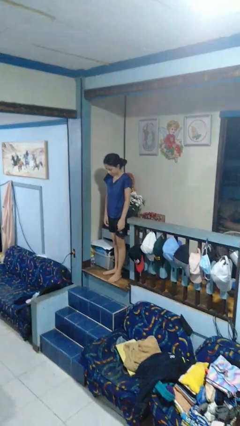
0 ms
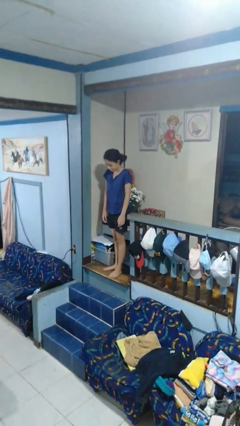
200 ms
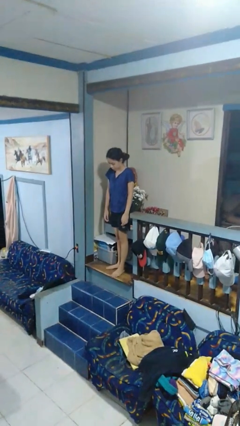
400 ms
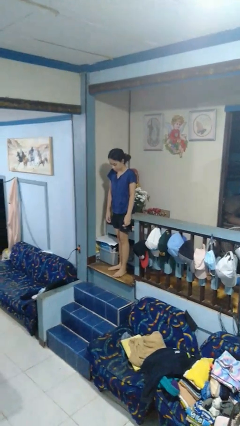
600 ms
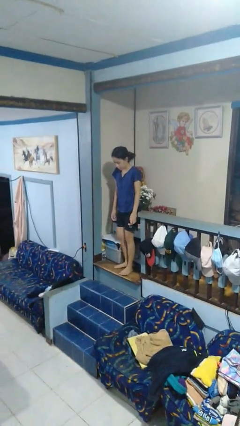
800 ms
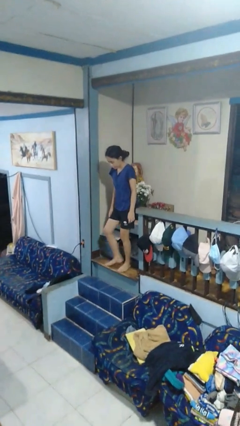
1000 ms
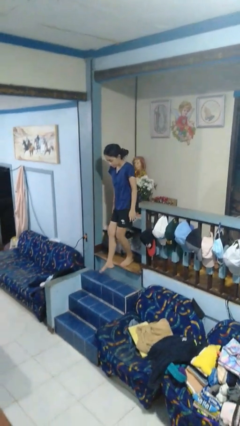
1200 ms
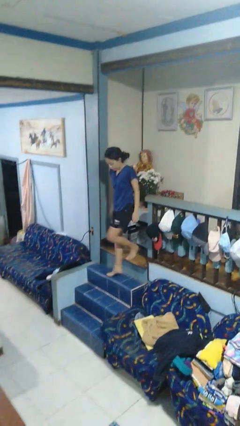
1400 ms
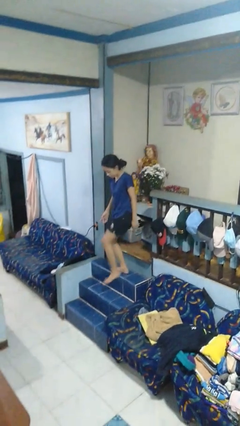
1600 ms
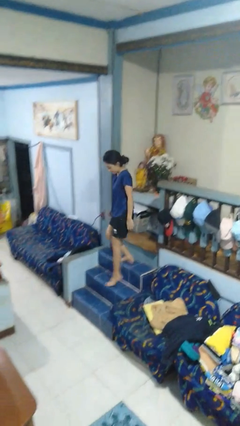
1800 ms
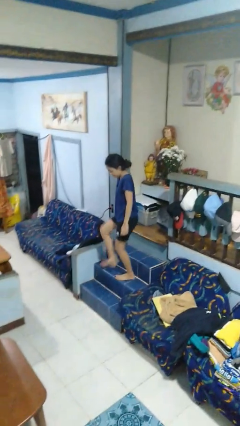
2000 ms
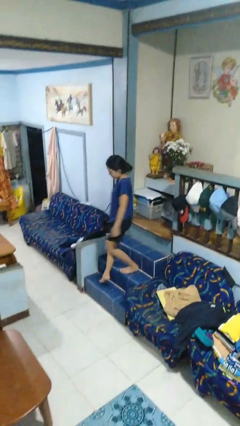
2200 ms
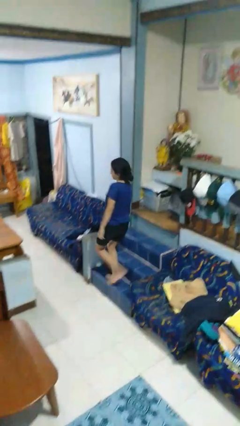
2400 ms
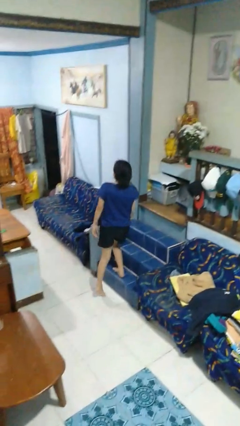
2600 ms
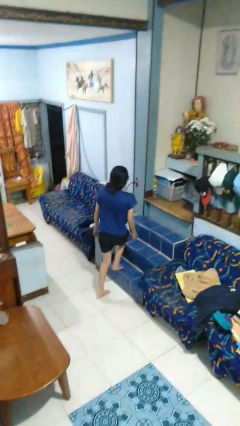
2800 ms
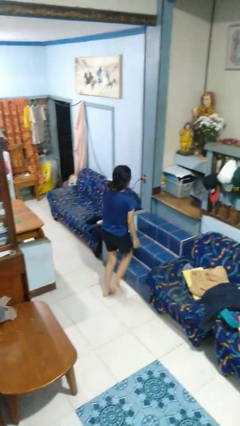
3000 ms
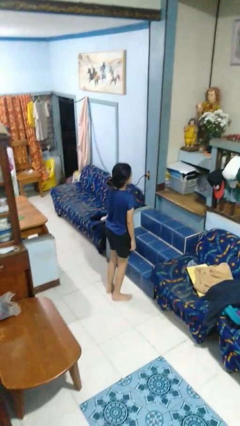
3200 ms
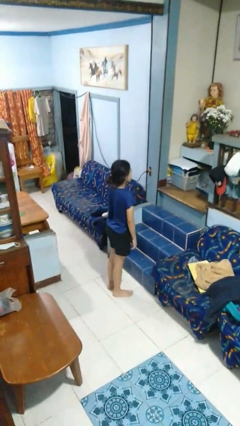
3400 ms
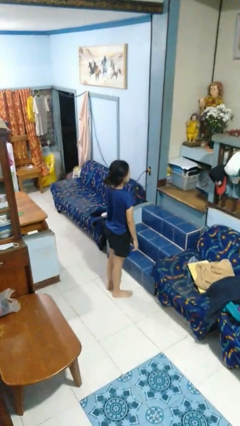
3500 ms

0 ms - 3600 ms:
person climbs down stairs

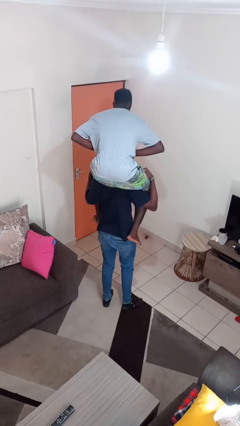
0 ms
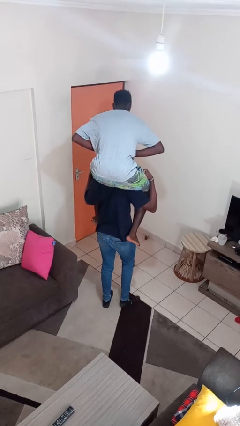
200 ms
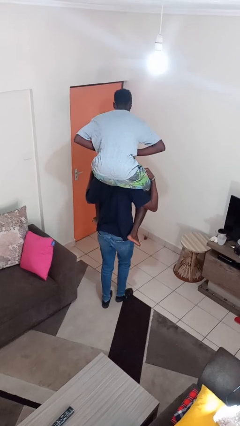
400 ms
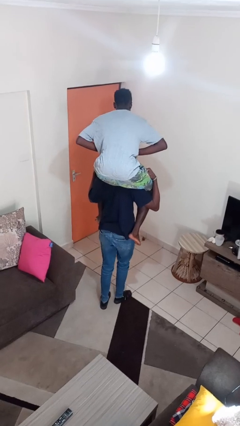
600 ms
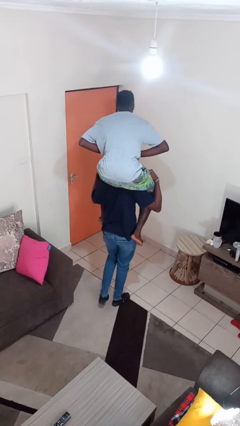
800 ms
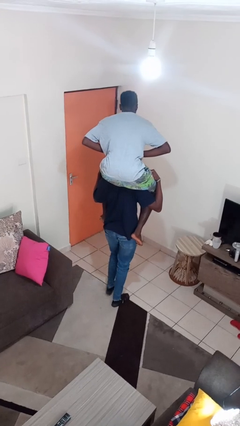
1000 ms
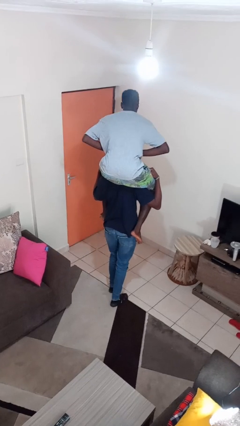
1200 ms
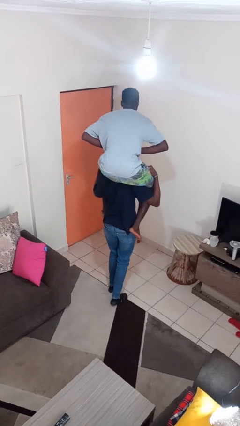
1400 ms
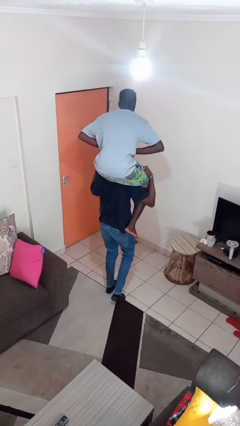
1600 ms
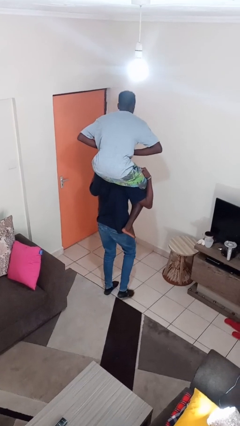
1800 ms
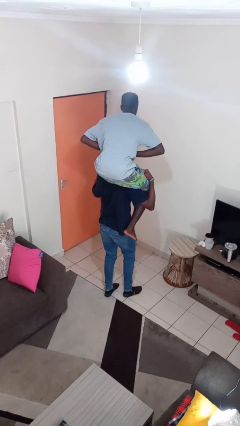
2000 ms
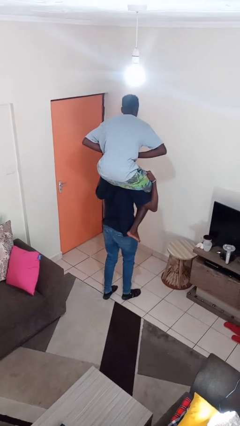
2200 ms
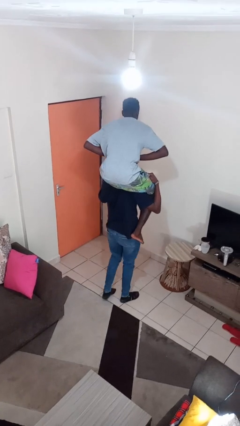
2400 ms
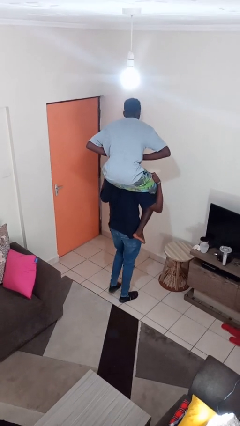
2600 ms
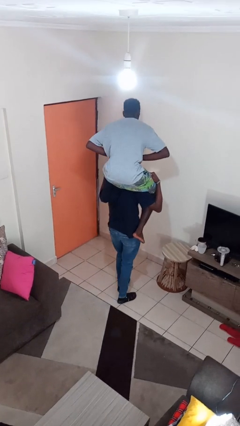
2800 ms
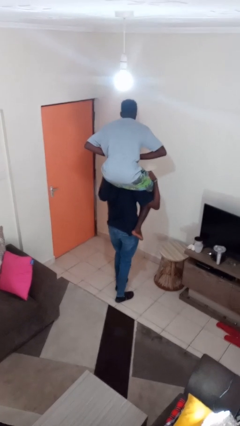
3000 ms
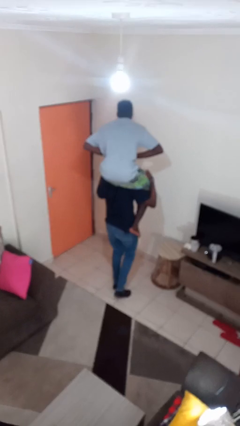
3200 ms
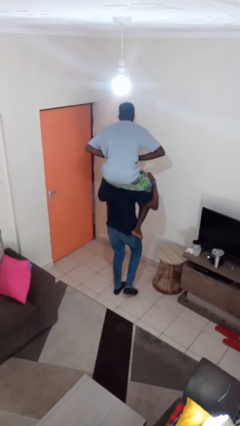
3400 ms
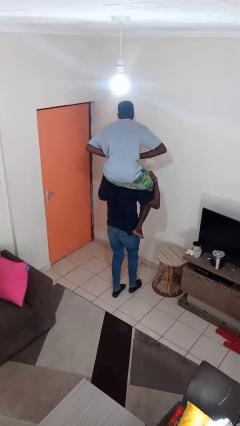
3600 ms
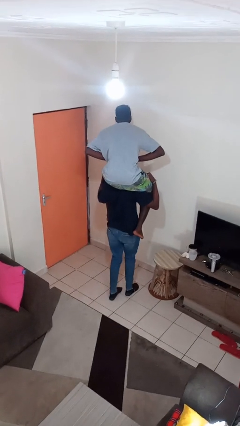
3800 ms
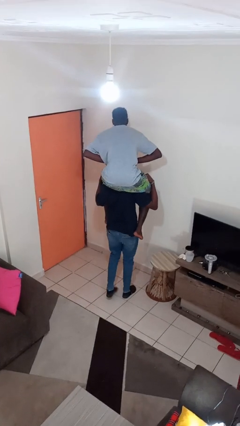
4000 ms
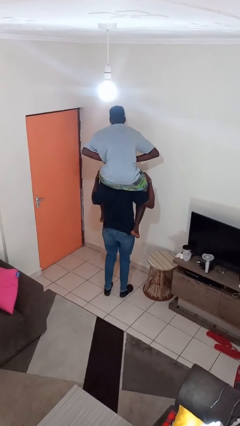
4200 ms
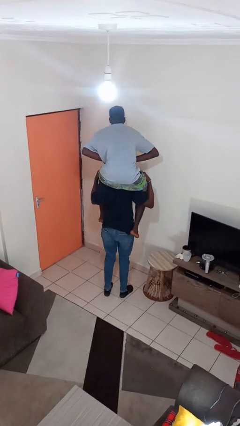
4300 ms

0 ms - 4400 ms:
person carries person on shoulders

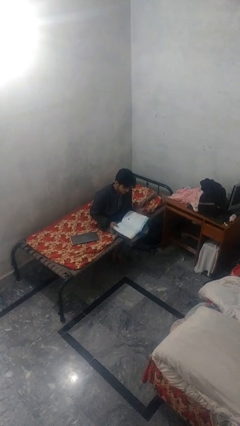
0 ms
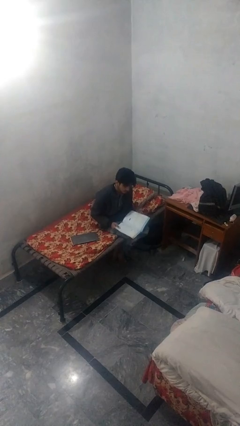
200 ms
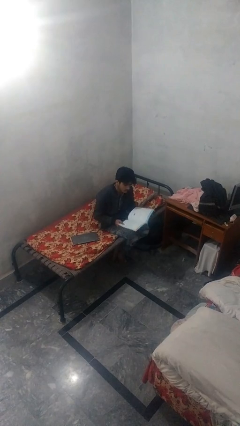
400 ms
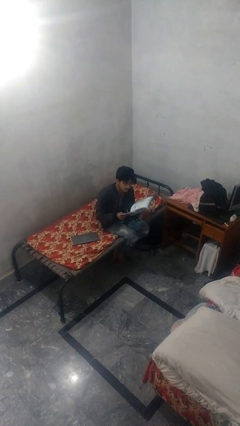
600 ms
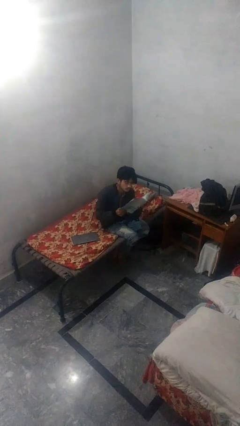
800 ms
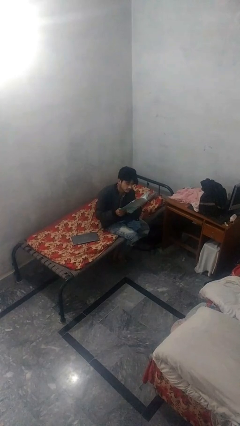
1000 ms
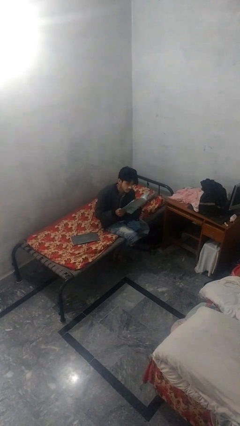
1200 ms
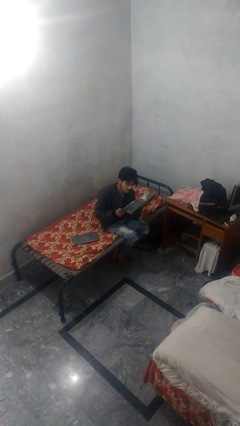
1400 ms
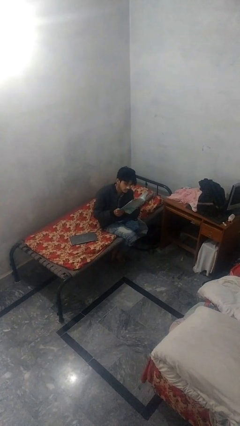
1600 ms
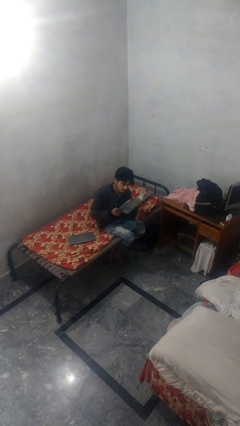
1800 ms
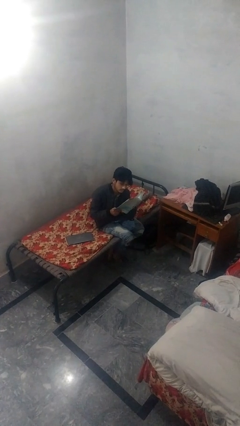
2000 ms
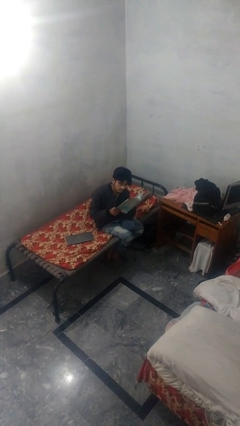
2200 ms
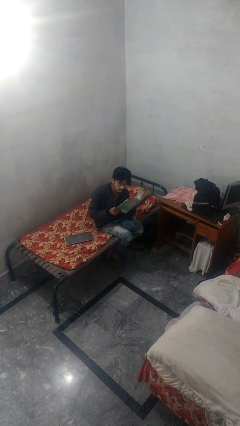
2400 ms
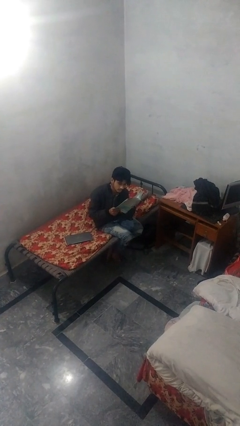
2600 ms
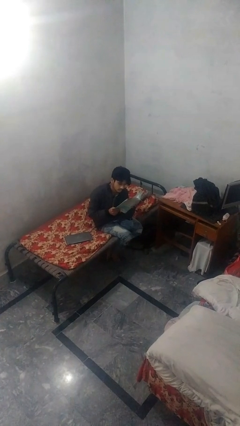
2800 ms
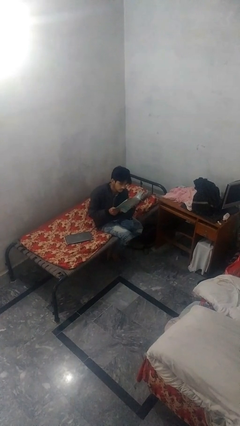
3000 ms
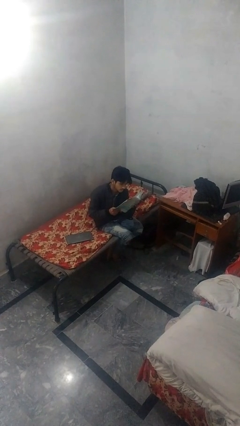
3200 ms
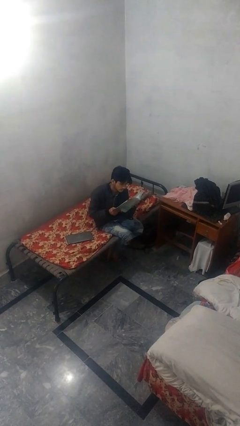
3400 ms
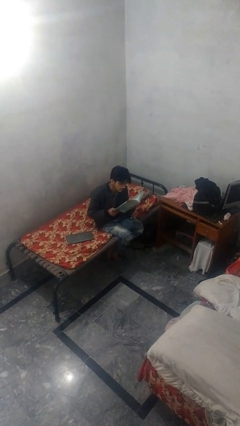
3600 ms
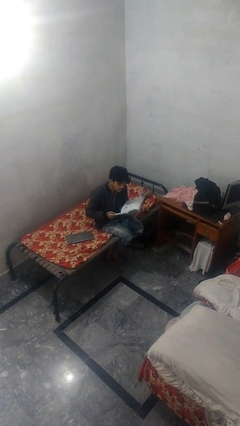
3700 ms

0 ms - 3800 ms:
person reads document

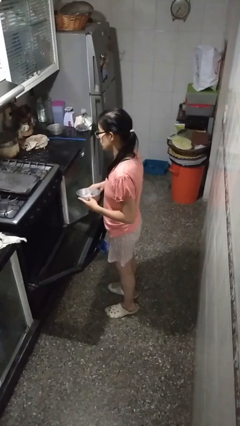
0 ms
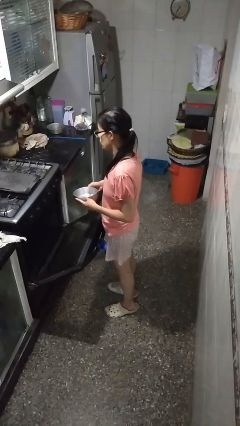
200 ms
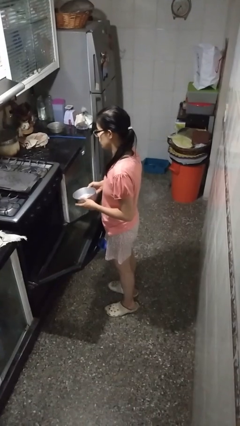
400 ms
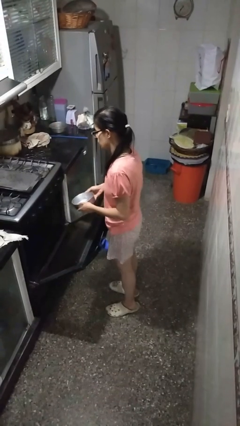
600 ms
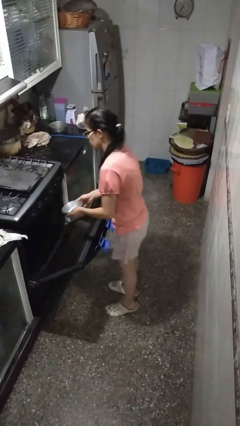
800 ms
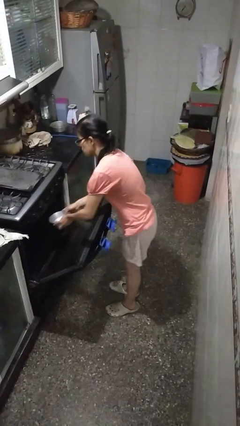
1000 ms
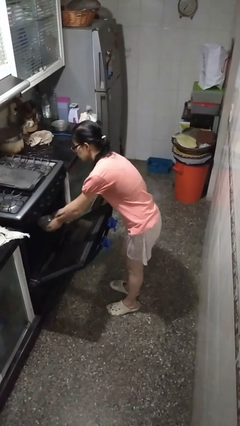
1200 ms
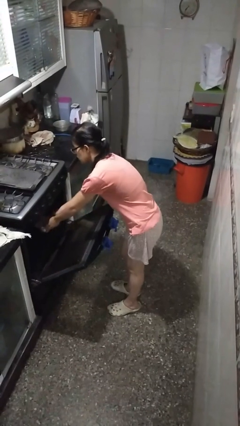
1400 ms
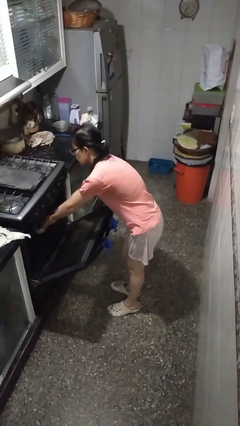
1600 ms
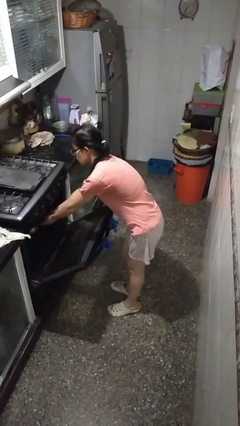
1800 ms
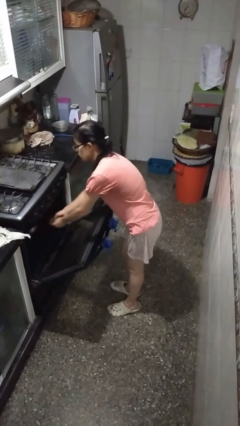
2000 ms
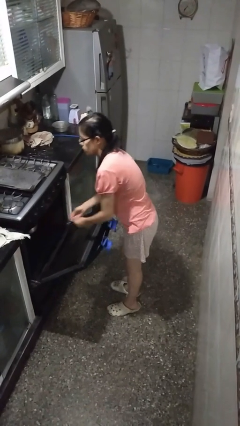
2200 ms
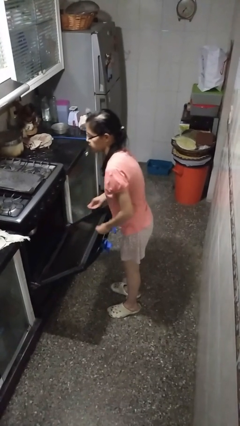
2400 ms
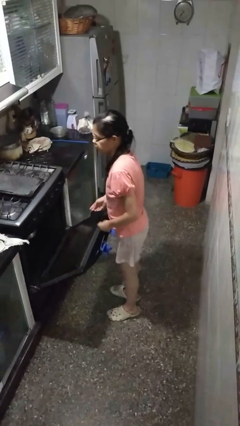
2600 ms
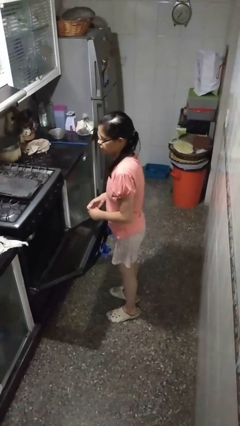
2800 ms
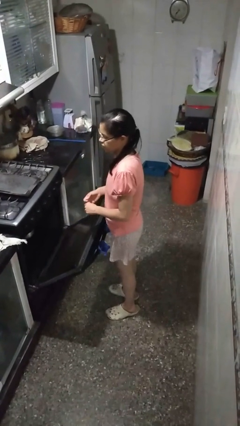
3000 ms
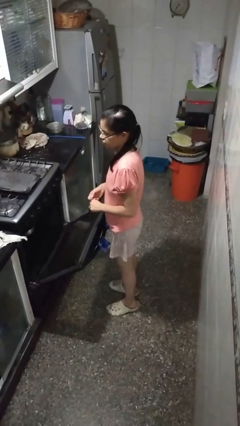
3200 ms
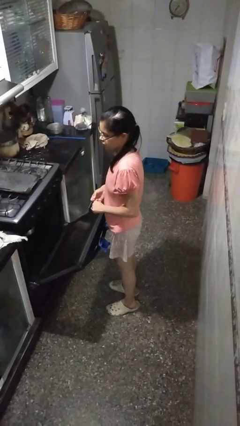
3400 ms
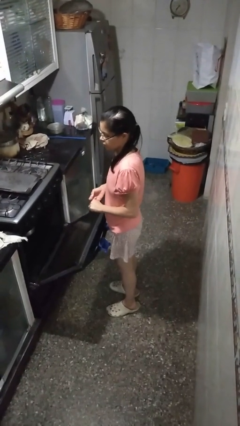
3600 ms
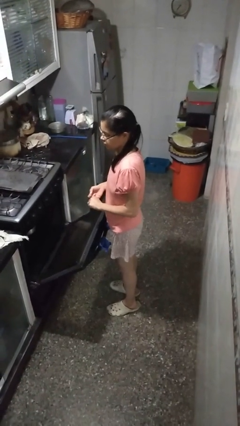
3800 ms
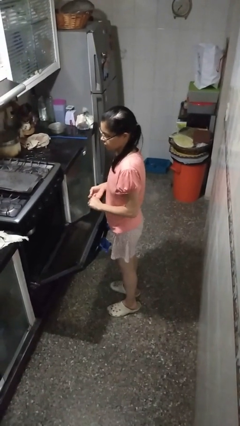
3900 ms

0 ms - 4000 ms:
person puts object into oven

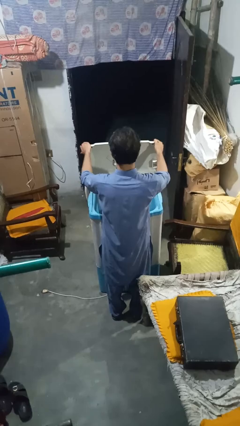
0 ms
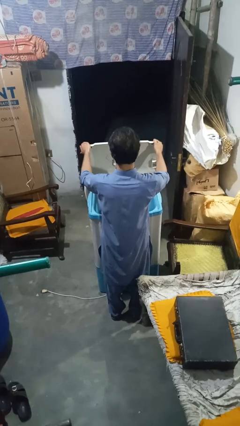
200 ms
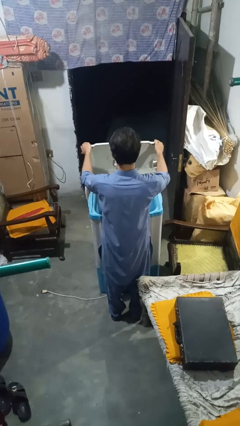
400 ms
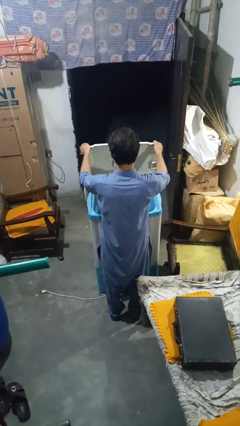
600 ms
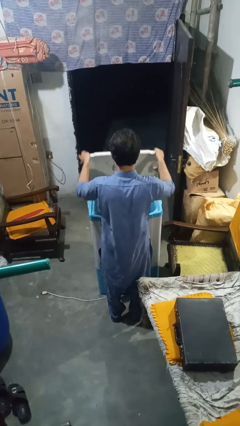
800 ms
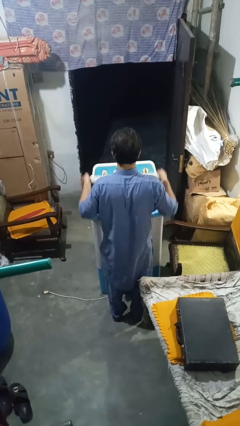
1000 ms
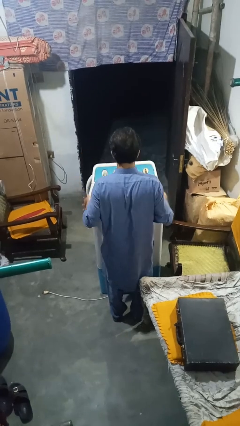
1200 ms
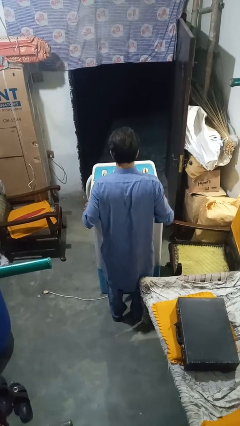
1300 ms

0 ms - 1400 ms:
person closes clothes washer

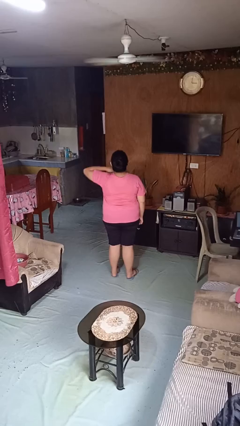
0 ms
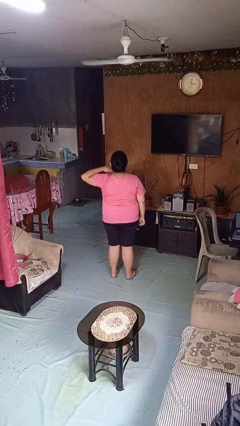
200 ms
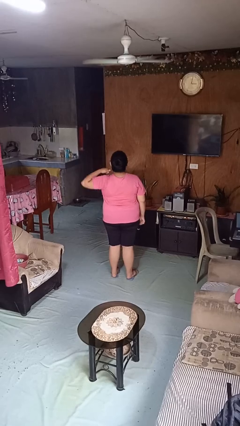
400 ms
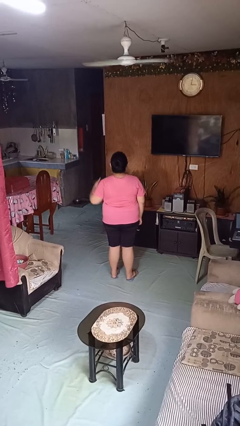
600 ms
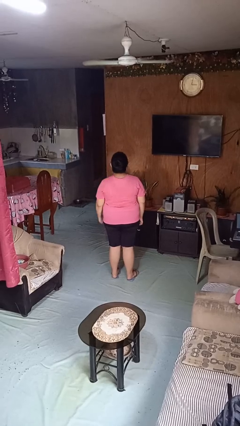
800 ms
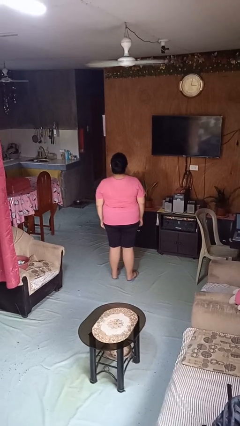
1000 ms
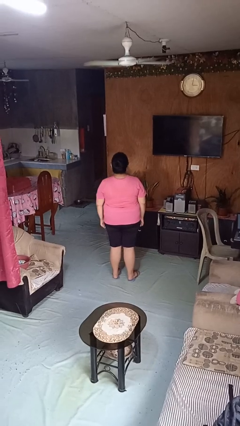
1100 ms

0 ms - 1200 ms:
person gestures cut
